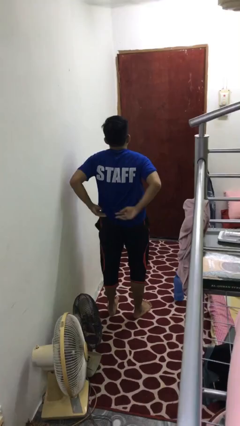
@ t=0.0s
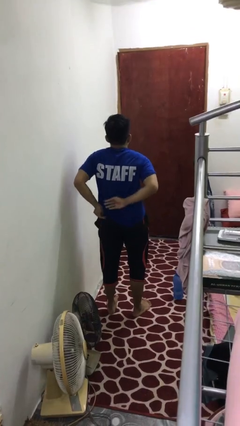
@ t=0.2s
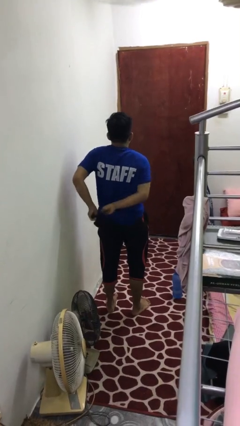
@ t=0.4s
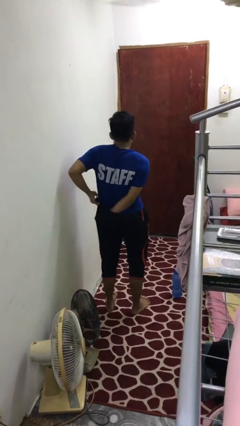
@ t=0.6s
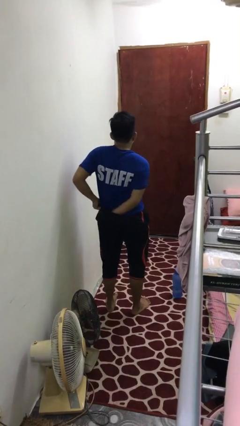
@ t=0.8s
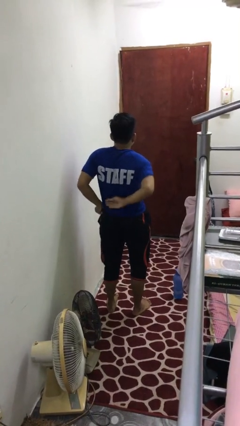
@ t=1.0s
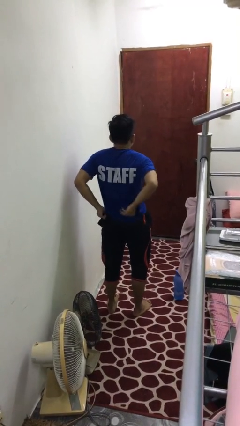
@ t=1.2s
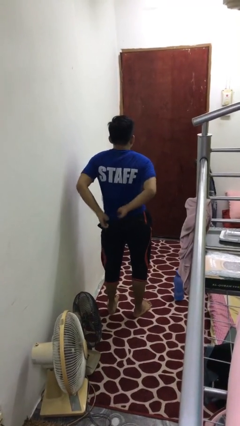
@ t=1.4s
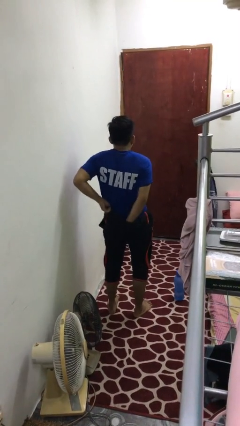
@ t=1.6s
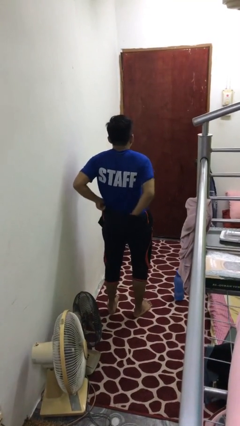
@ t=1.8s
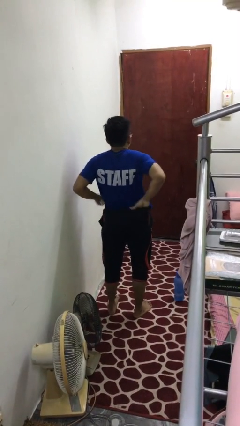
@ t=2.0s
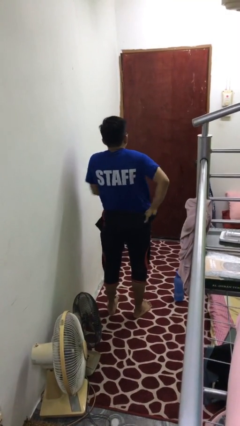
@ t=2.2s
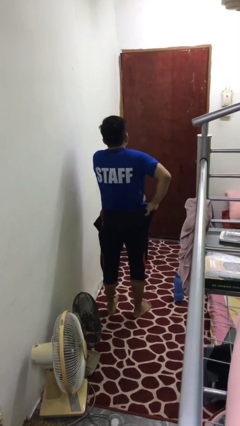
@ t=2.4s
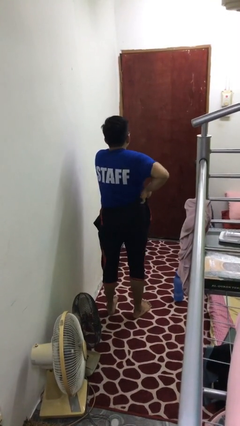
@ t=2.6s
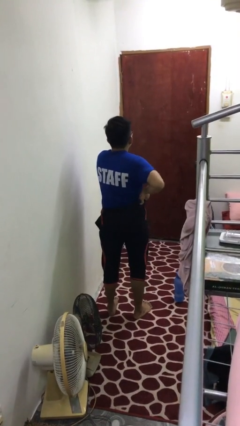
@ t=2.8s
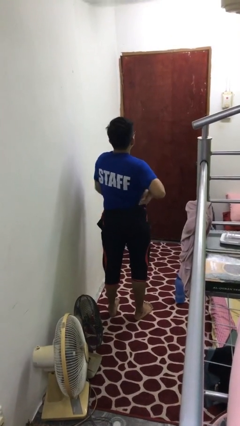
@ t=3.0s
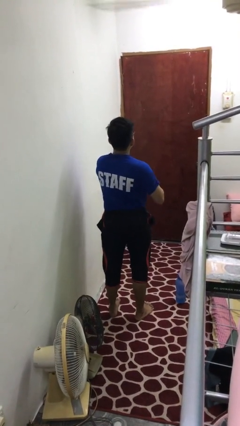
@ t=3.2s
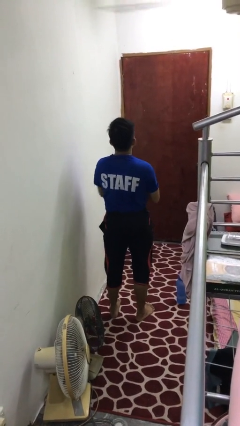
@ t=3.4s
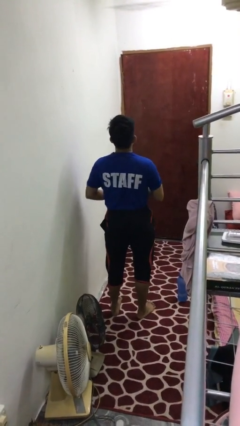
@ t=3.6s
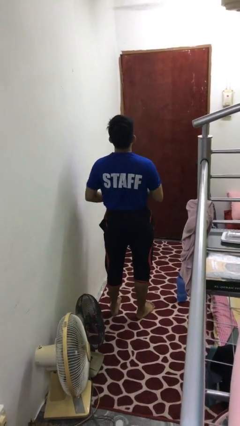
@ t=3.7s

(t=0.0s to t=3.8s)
person tucks in shirt

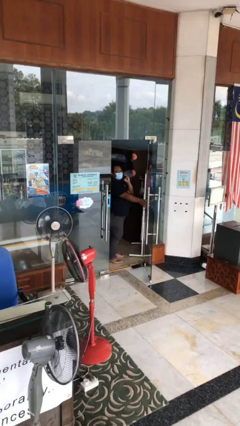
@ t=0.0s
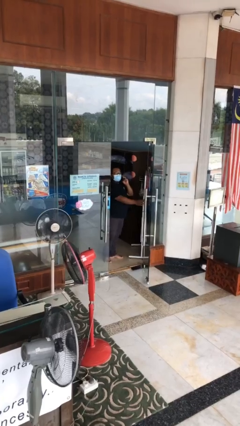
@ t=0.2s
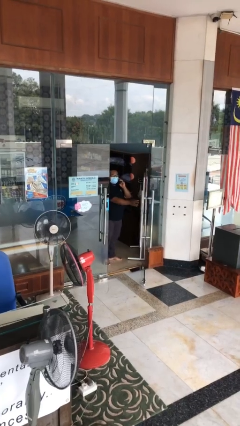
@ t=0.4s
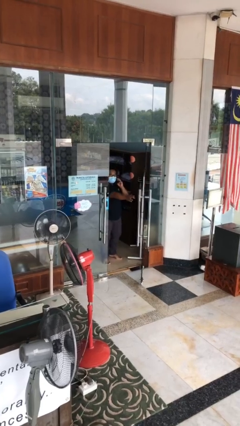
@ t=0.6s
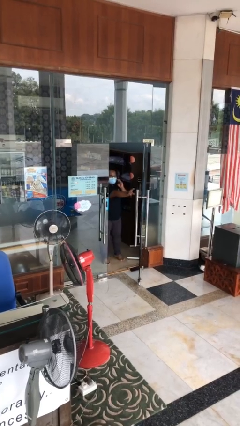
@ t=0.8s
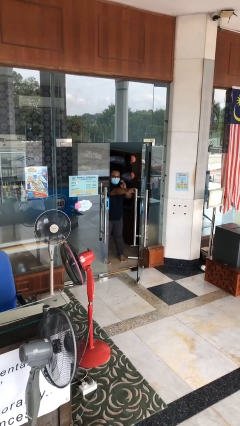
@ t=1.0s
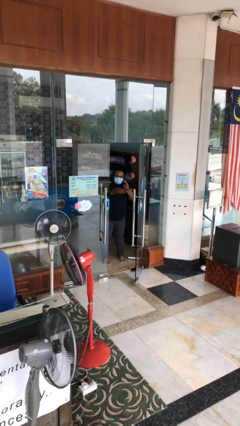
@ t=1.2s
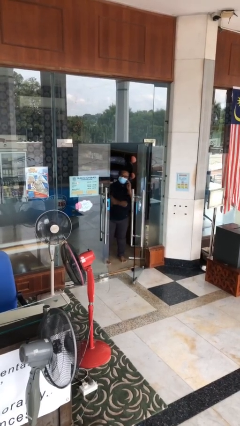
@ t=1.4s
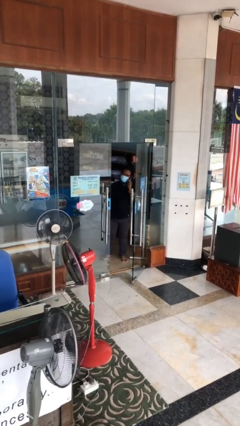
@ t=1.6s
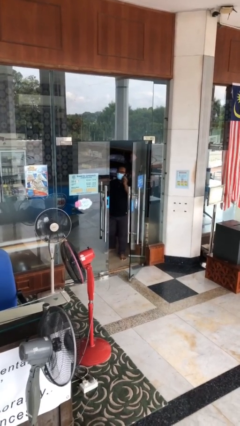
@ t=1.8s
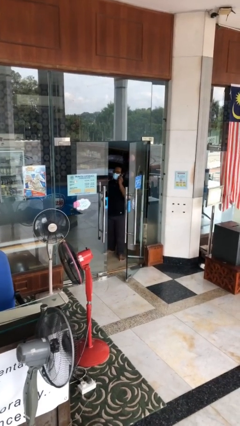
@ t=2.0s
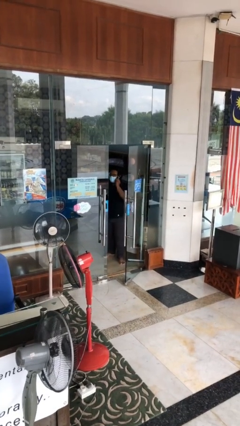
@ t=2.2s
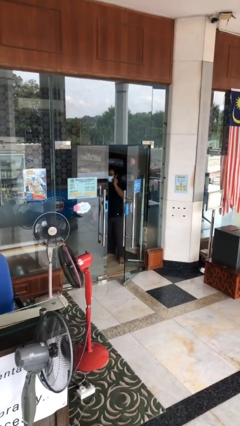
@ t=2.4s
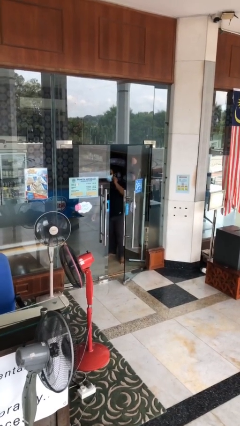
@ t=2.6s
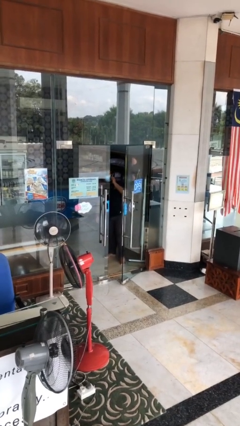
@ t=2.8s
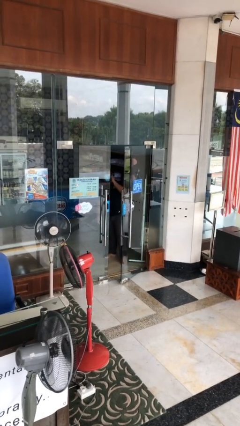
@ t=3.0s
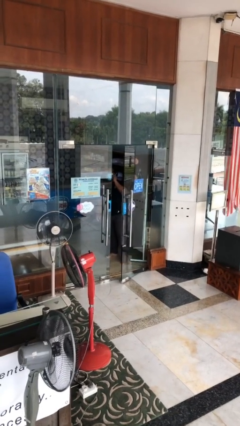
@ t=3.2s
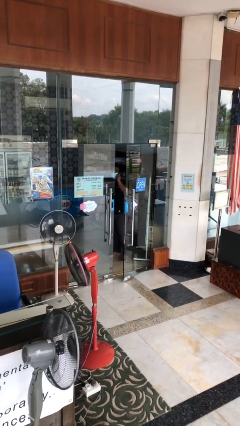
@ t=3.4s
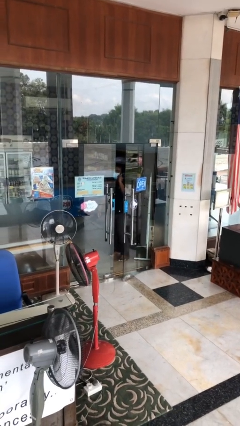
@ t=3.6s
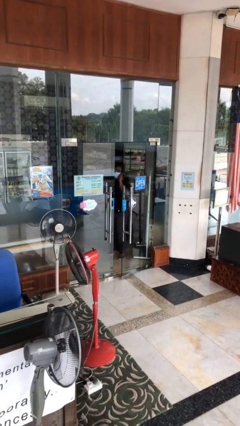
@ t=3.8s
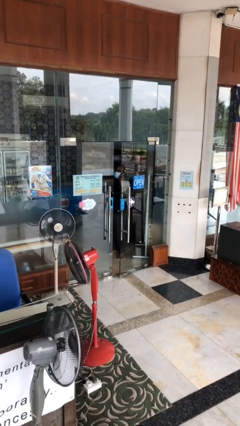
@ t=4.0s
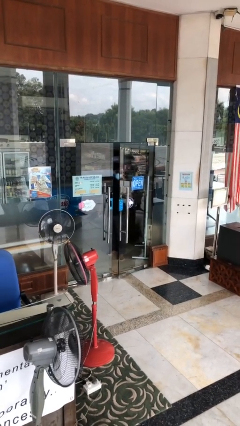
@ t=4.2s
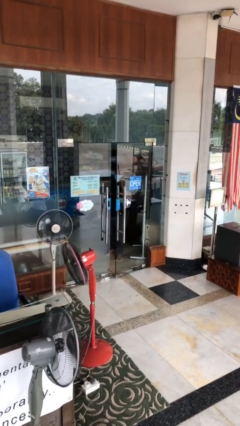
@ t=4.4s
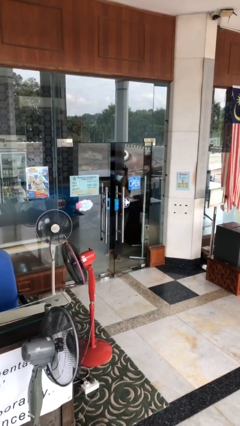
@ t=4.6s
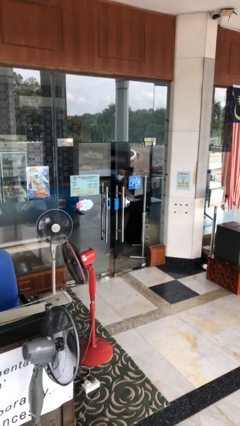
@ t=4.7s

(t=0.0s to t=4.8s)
person closes facility door

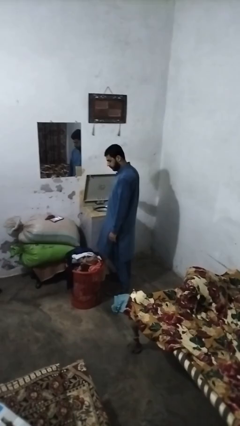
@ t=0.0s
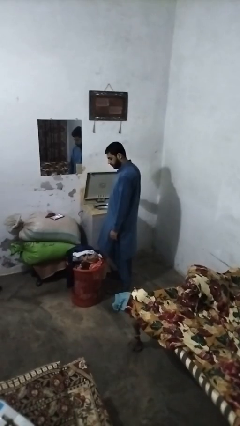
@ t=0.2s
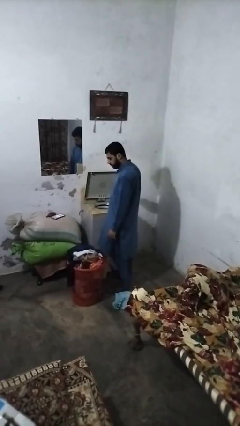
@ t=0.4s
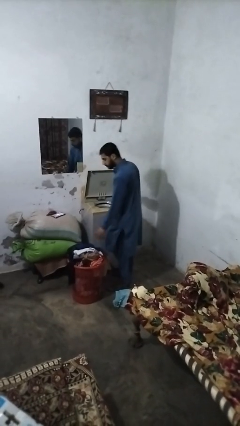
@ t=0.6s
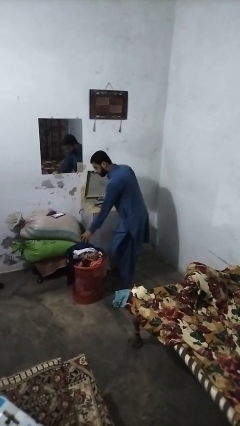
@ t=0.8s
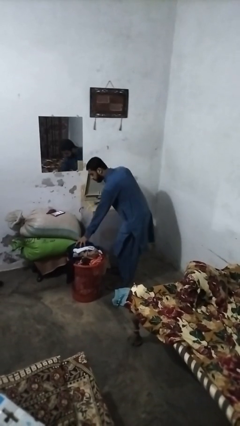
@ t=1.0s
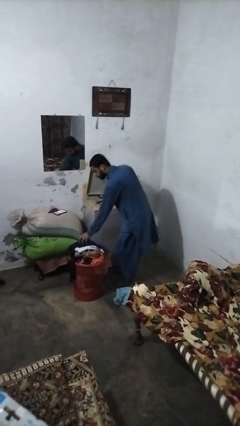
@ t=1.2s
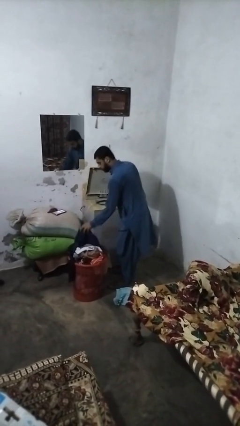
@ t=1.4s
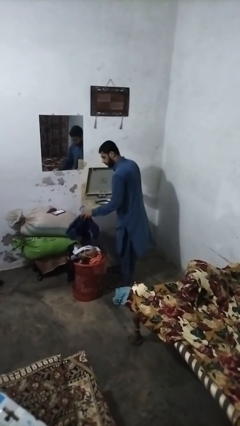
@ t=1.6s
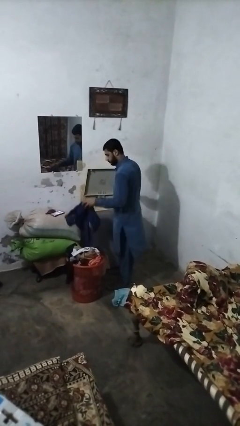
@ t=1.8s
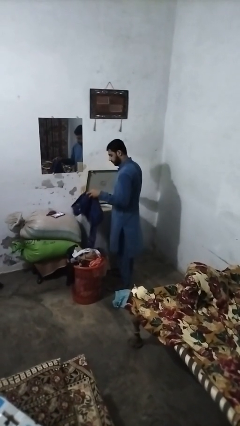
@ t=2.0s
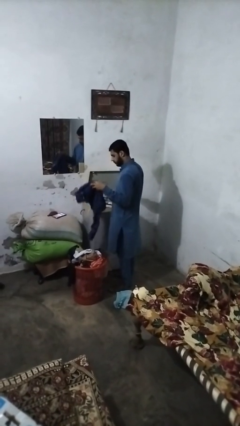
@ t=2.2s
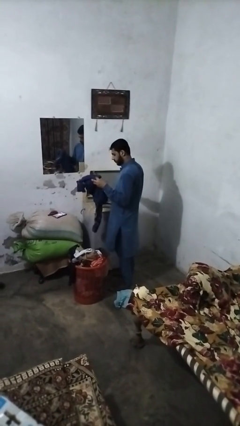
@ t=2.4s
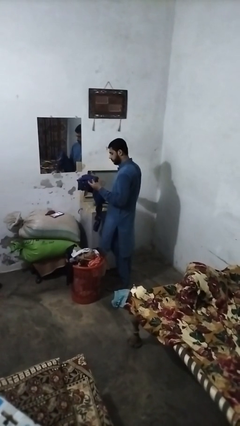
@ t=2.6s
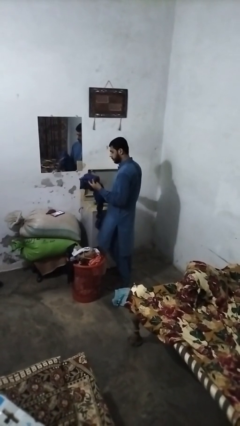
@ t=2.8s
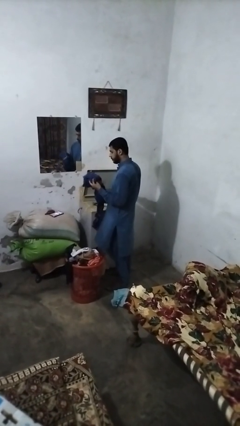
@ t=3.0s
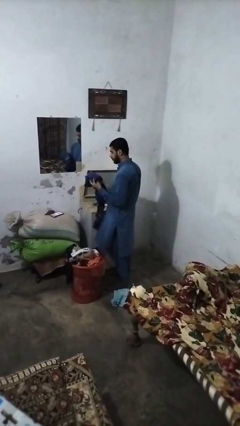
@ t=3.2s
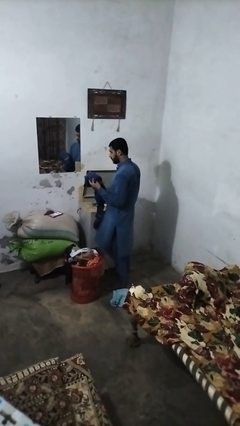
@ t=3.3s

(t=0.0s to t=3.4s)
person unloads clotheswasher

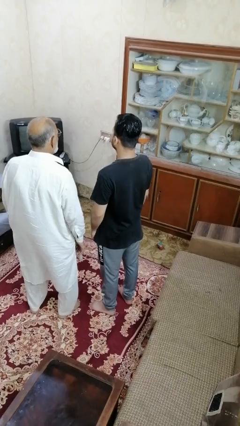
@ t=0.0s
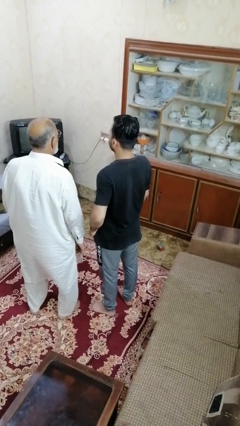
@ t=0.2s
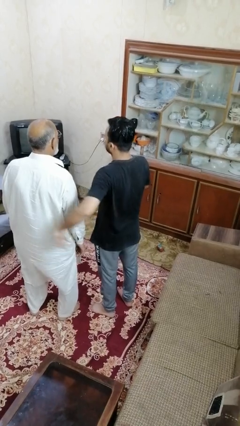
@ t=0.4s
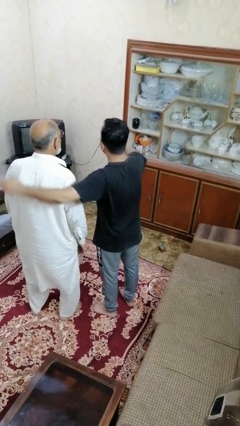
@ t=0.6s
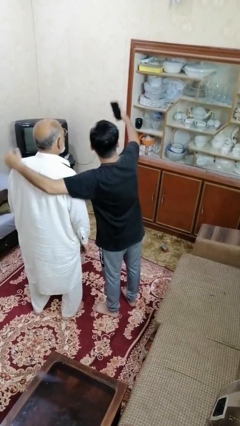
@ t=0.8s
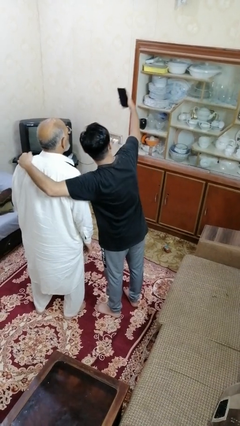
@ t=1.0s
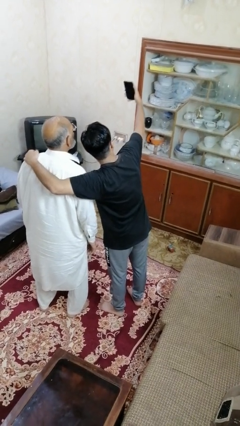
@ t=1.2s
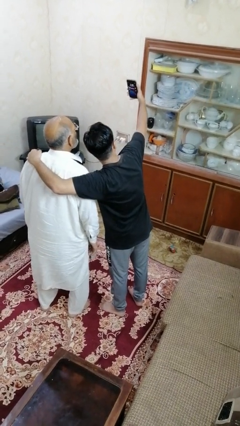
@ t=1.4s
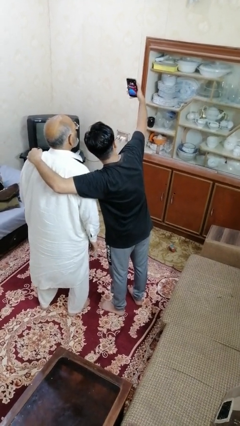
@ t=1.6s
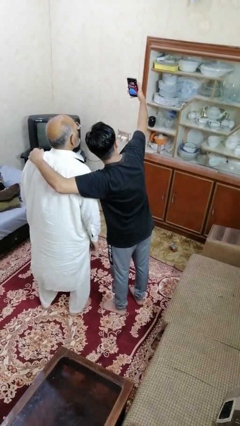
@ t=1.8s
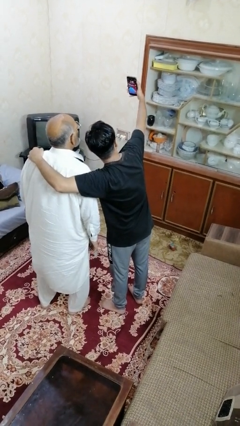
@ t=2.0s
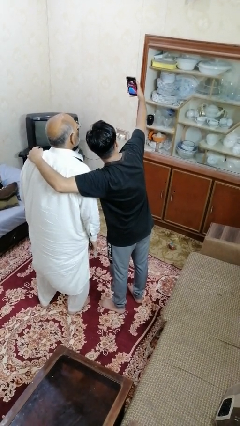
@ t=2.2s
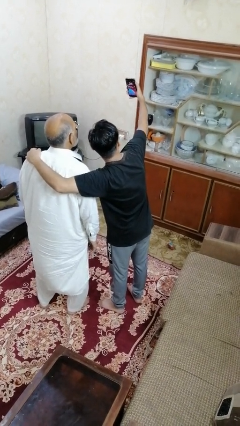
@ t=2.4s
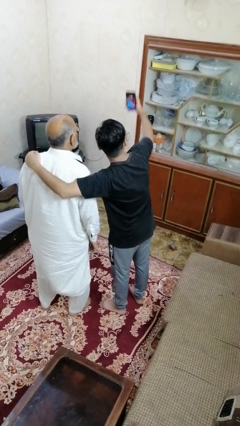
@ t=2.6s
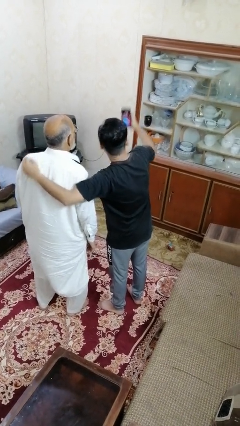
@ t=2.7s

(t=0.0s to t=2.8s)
person takes selfie with person

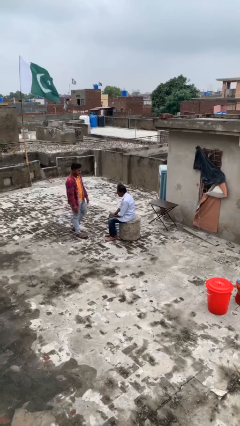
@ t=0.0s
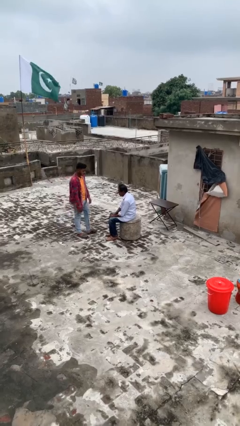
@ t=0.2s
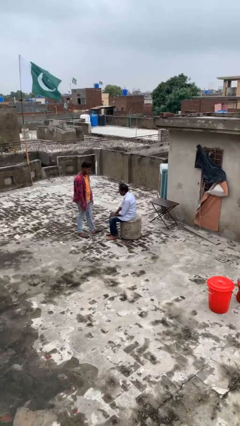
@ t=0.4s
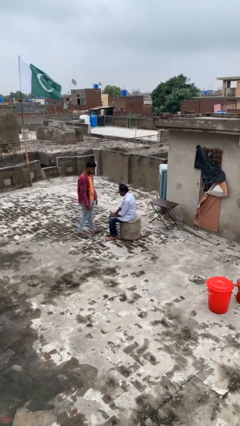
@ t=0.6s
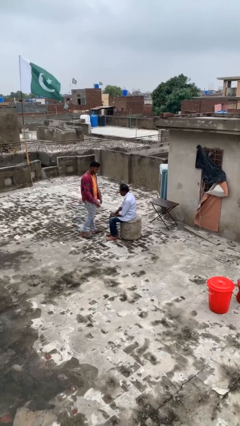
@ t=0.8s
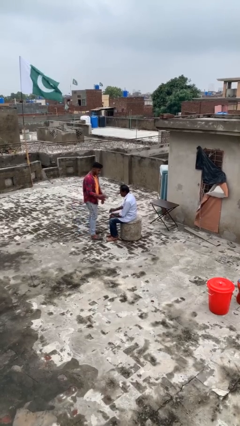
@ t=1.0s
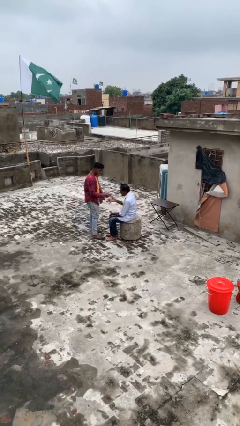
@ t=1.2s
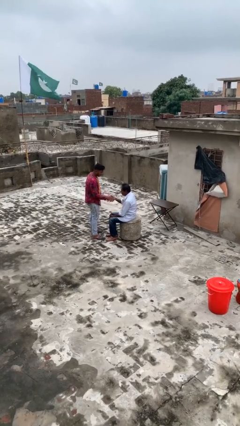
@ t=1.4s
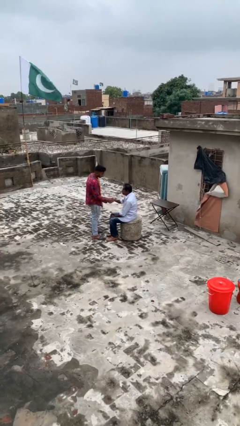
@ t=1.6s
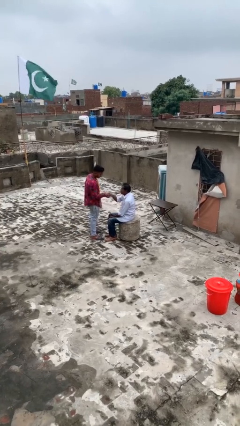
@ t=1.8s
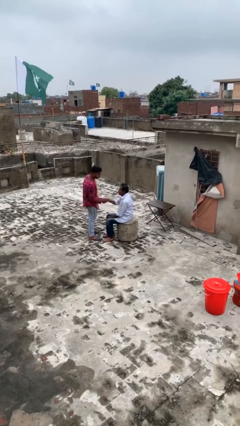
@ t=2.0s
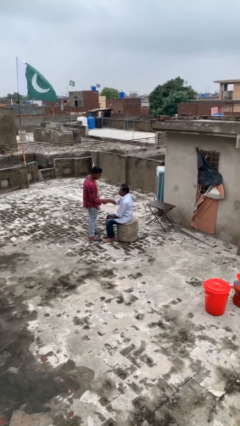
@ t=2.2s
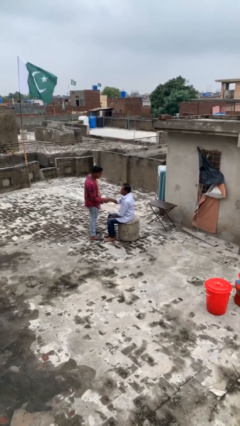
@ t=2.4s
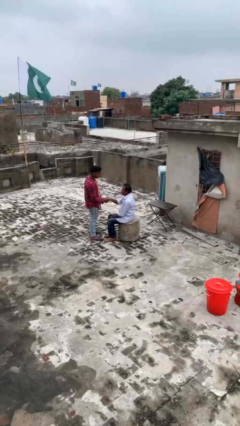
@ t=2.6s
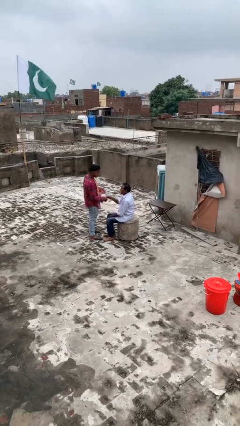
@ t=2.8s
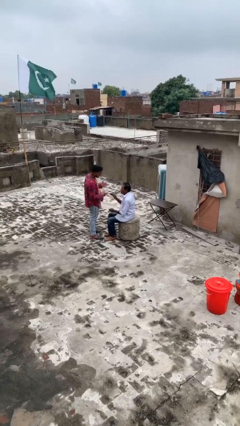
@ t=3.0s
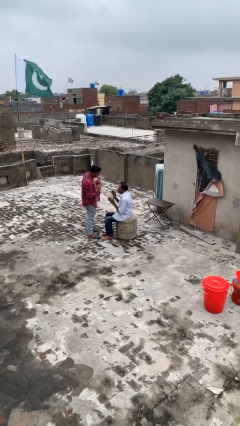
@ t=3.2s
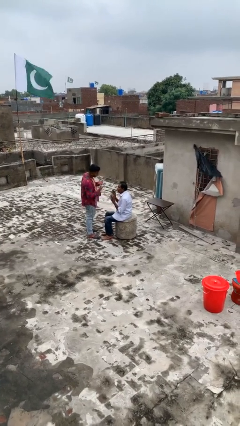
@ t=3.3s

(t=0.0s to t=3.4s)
person shakes hand
